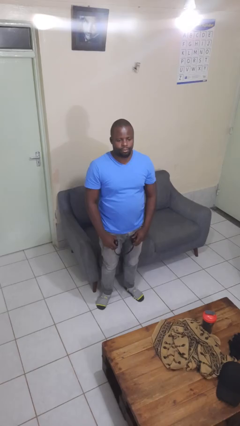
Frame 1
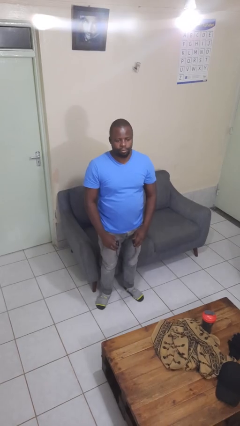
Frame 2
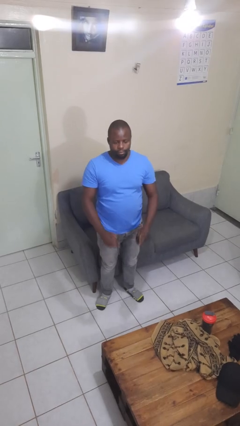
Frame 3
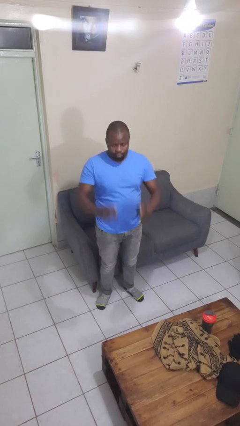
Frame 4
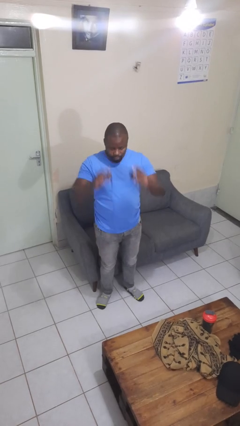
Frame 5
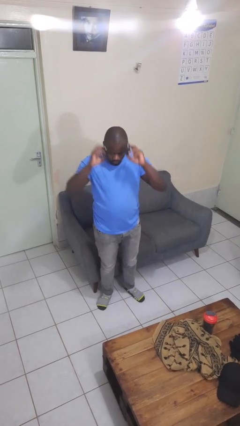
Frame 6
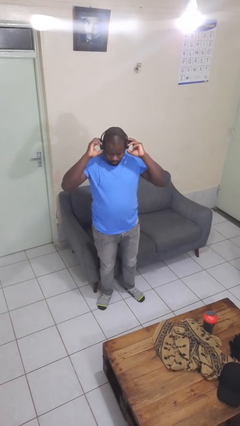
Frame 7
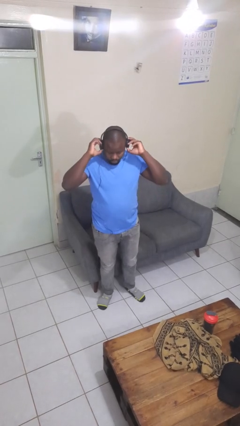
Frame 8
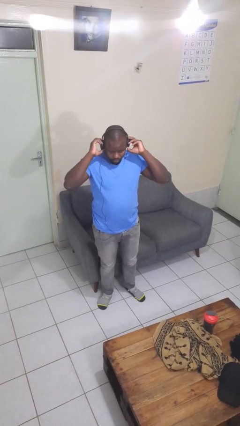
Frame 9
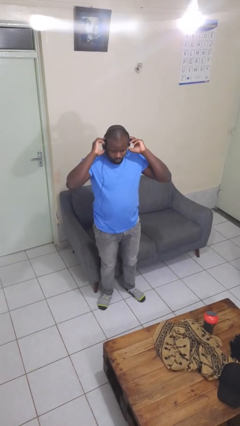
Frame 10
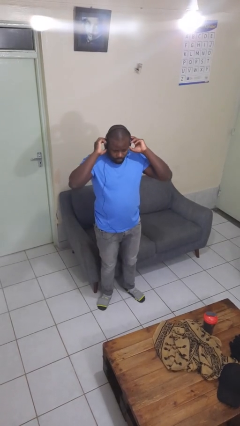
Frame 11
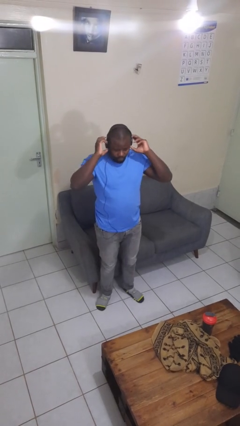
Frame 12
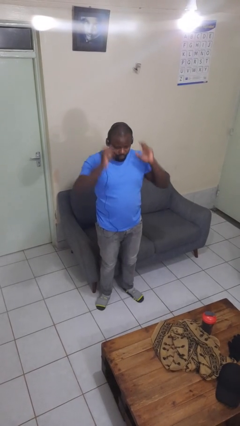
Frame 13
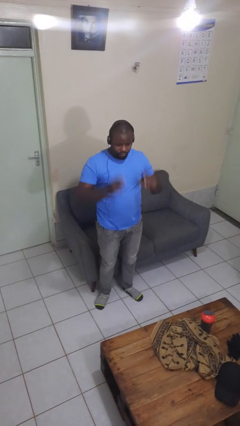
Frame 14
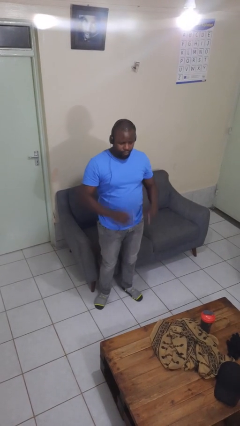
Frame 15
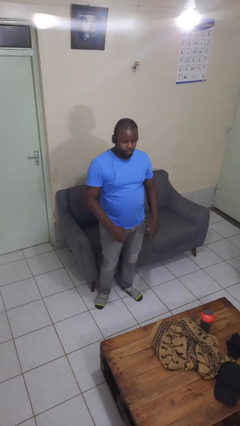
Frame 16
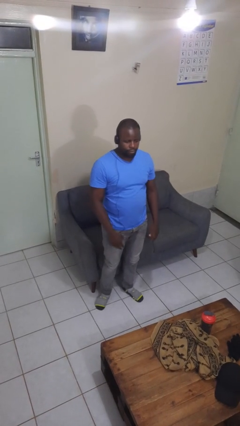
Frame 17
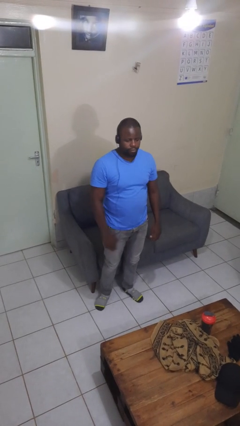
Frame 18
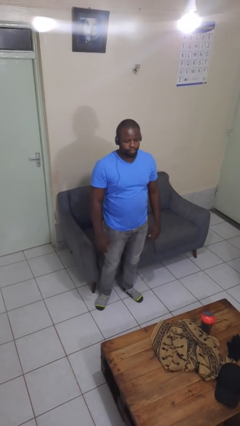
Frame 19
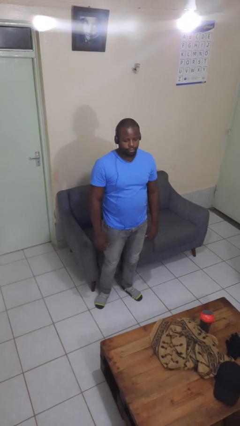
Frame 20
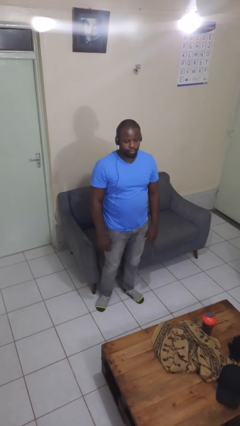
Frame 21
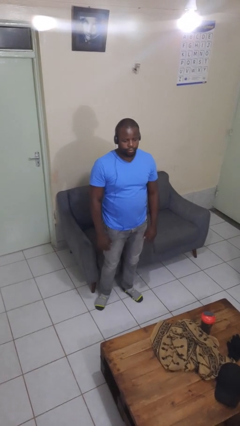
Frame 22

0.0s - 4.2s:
person puts on headphones

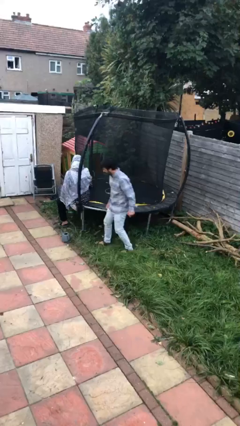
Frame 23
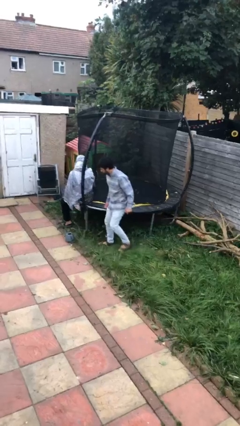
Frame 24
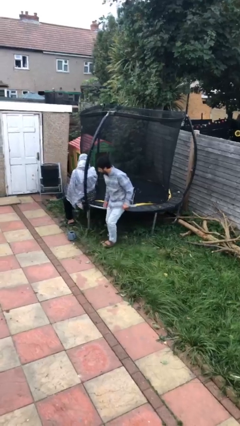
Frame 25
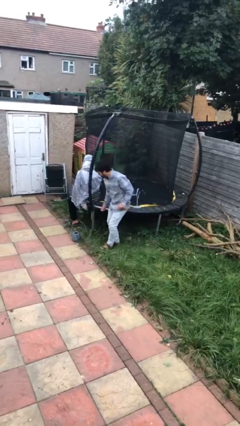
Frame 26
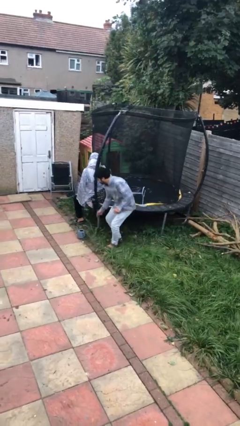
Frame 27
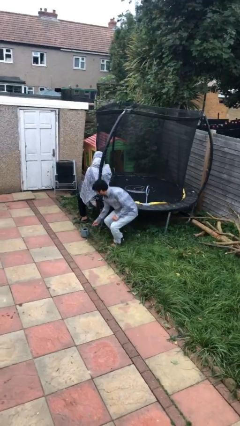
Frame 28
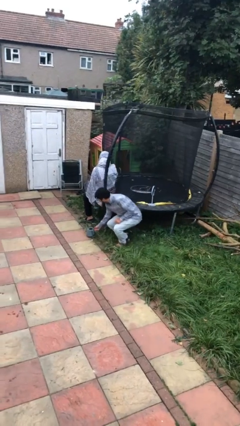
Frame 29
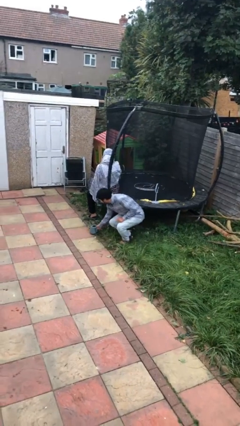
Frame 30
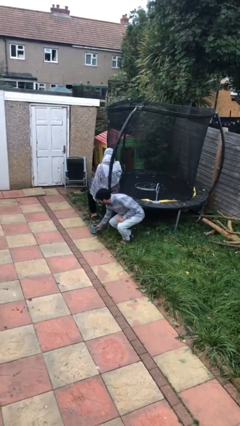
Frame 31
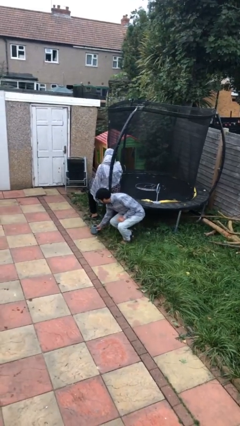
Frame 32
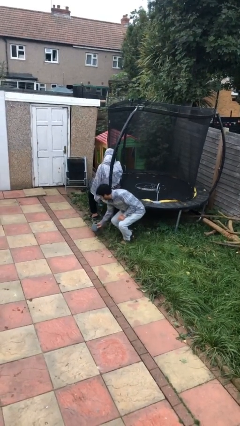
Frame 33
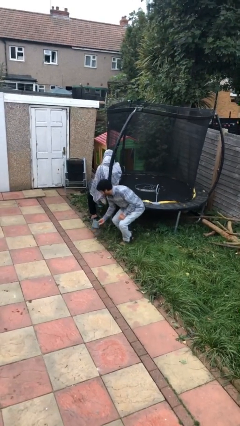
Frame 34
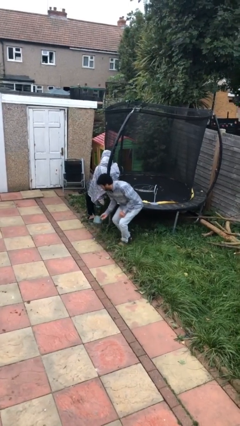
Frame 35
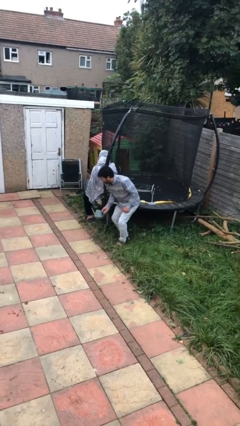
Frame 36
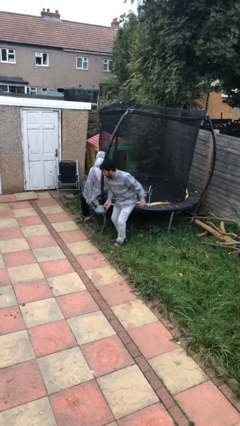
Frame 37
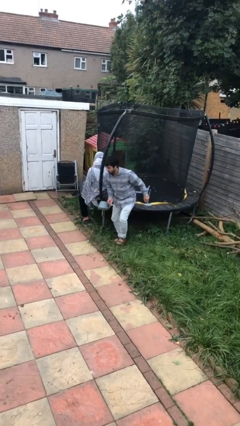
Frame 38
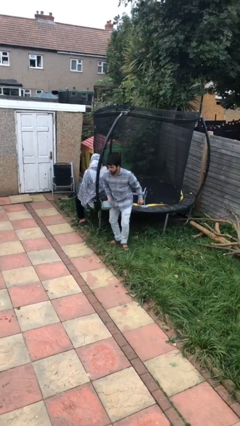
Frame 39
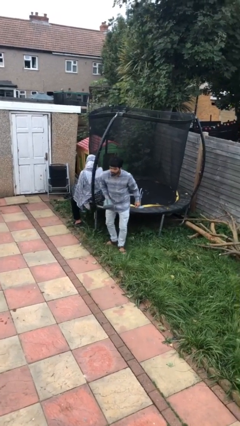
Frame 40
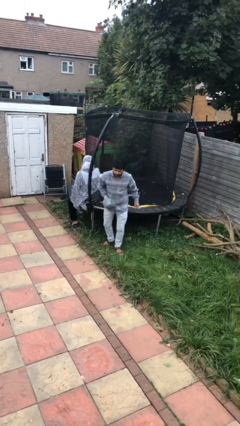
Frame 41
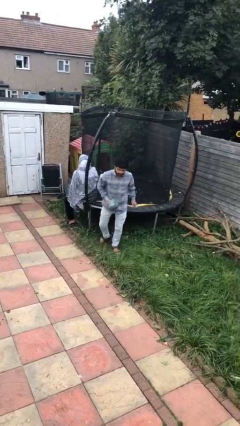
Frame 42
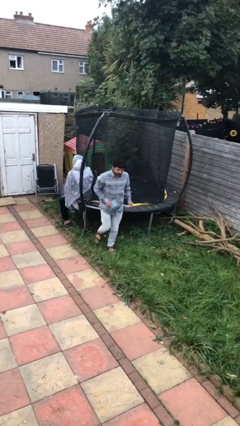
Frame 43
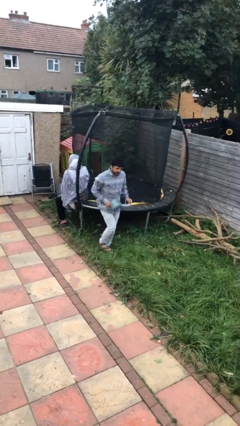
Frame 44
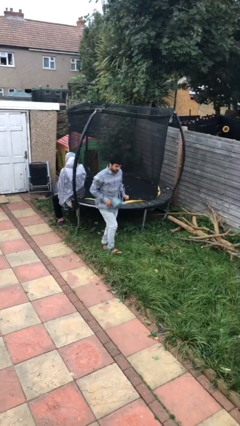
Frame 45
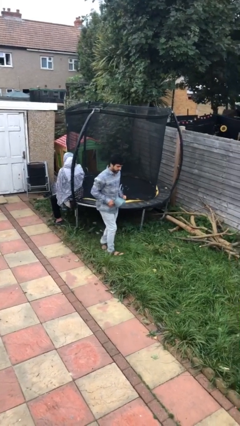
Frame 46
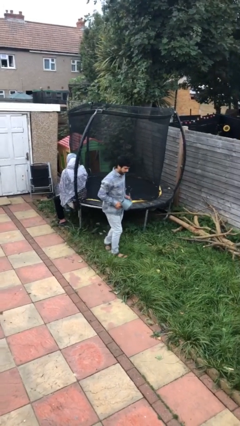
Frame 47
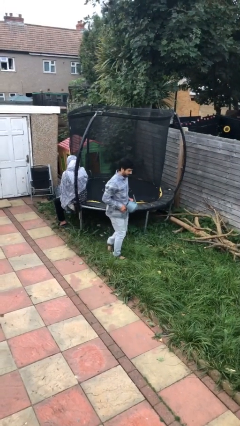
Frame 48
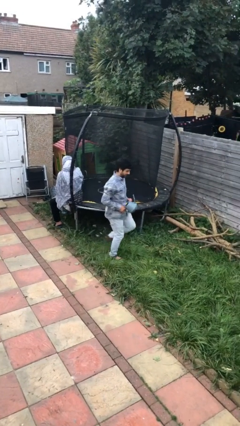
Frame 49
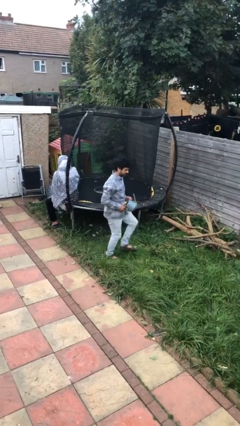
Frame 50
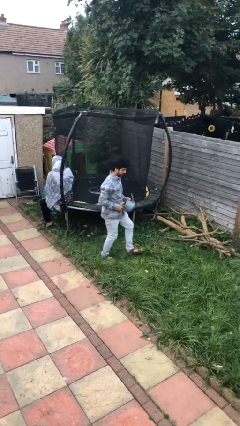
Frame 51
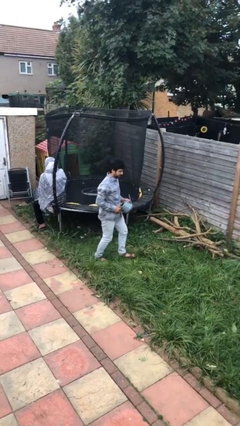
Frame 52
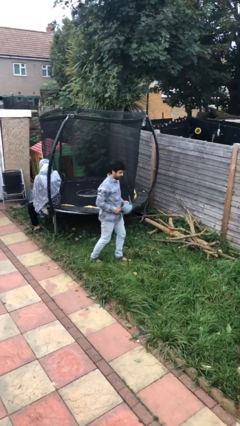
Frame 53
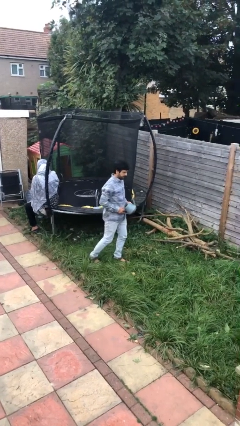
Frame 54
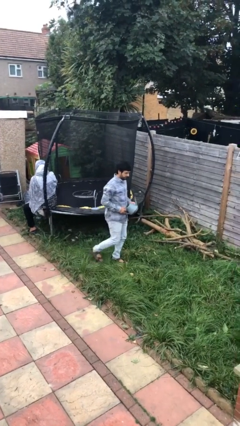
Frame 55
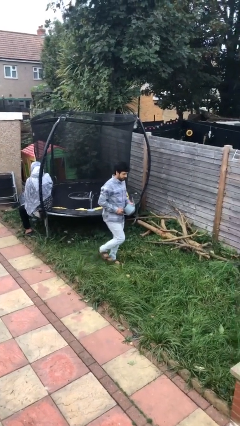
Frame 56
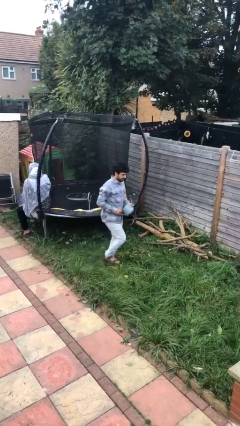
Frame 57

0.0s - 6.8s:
person steals object from person

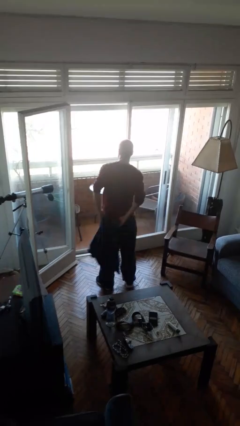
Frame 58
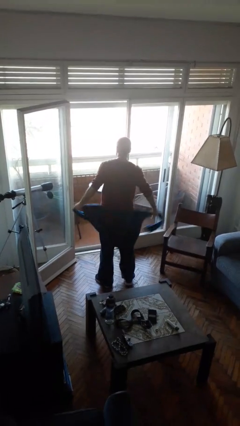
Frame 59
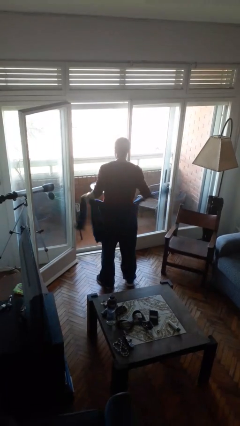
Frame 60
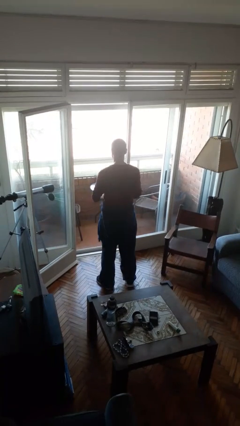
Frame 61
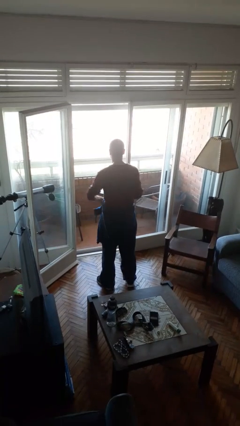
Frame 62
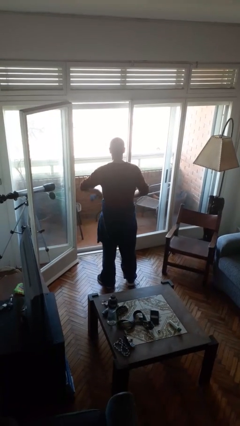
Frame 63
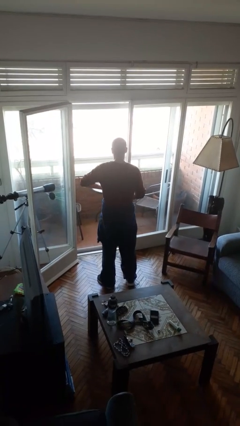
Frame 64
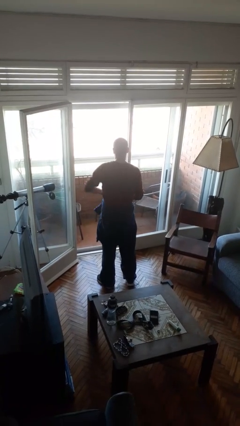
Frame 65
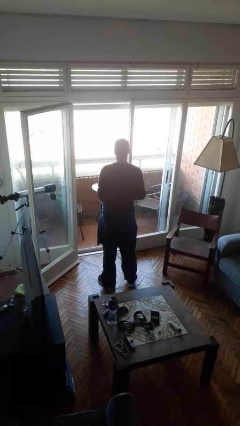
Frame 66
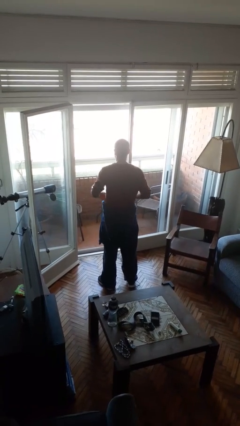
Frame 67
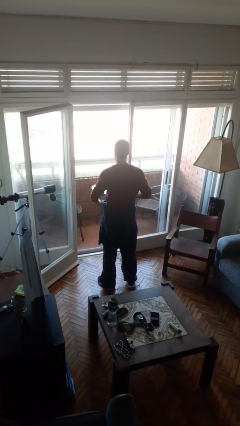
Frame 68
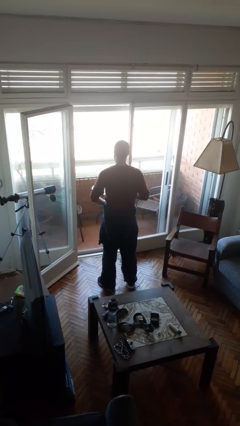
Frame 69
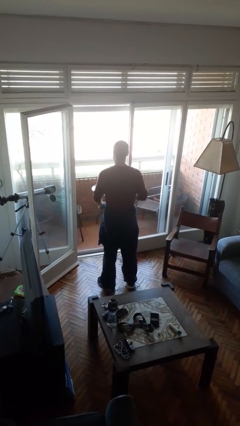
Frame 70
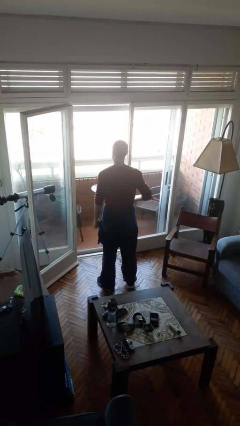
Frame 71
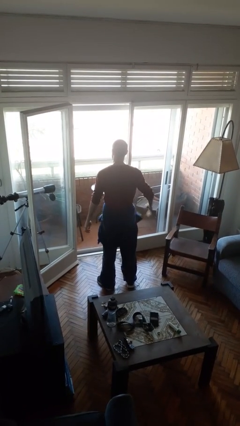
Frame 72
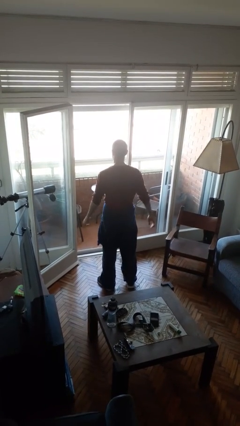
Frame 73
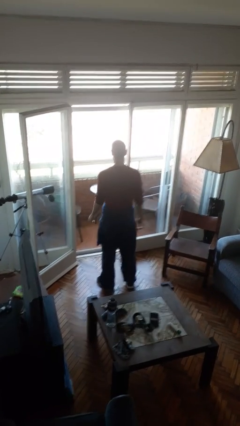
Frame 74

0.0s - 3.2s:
person ties jacket around waist

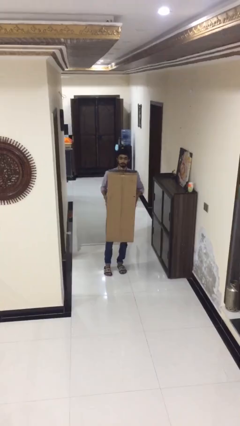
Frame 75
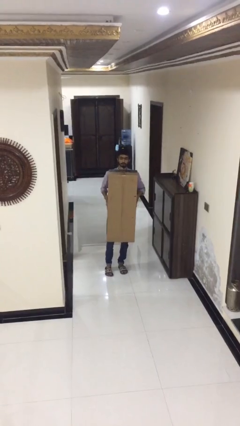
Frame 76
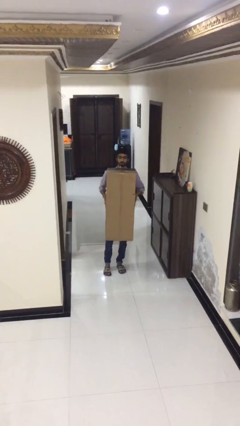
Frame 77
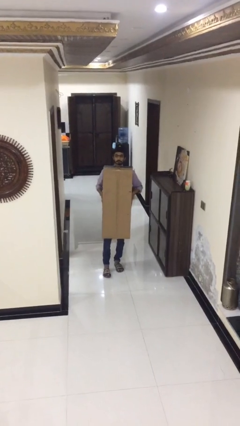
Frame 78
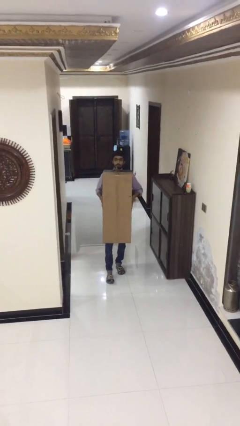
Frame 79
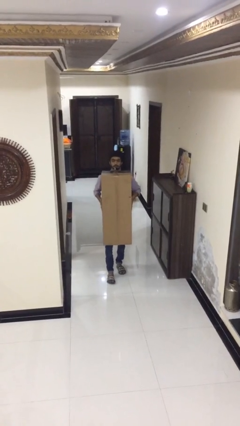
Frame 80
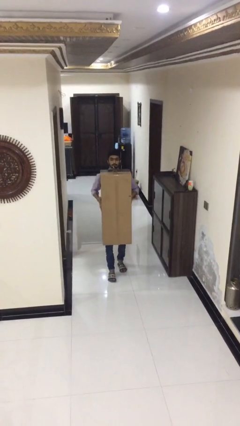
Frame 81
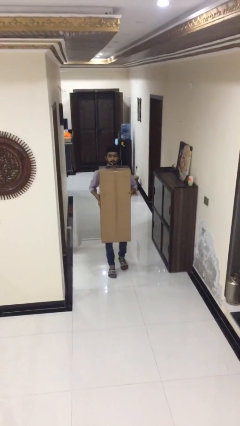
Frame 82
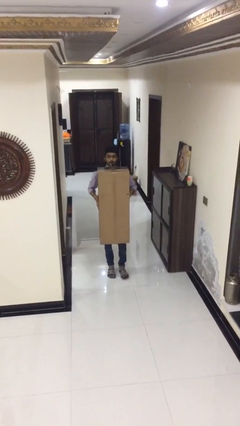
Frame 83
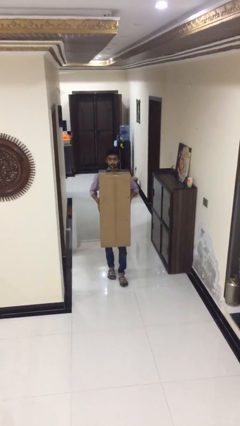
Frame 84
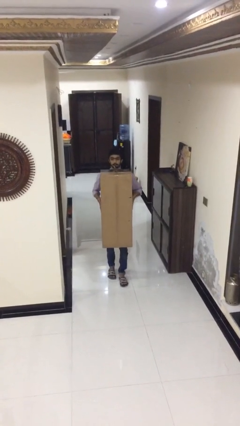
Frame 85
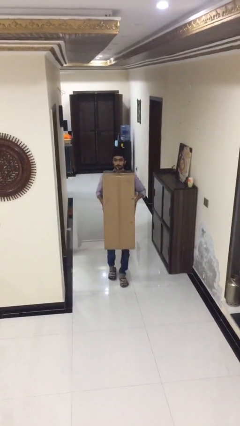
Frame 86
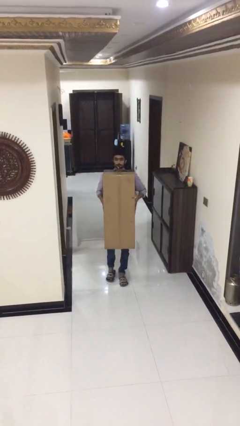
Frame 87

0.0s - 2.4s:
person carries heavy object

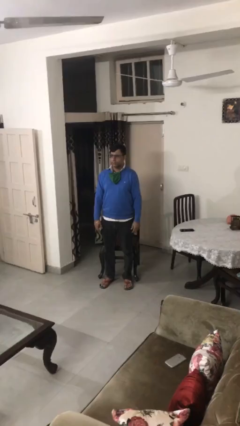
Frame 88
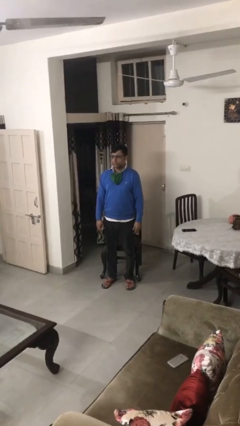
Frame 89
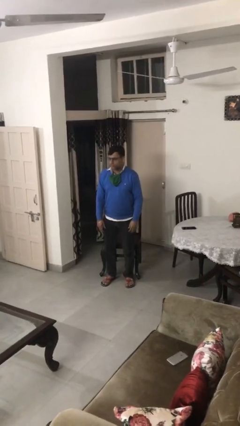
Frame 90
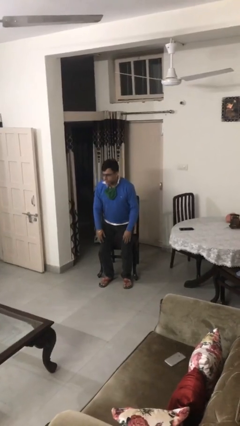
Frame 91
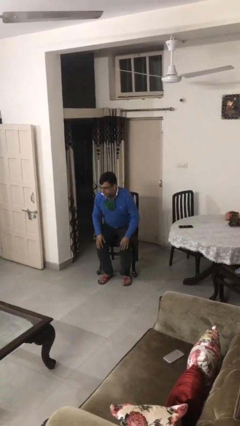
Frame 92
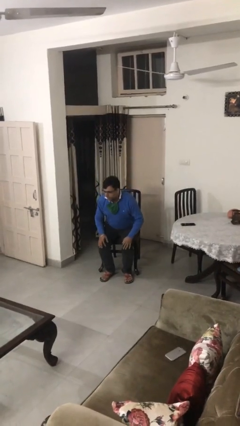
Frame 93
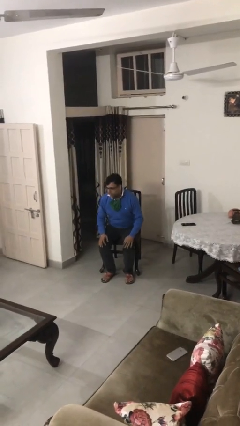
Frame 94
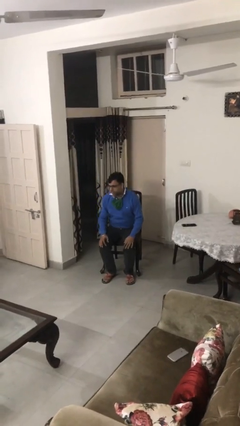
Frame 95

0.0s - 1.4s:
person sits down
